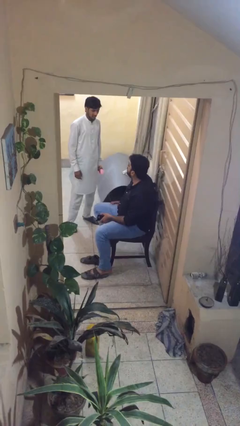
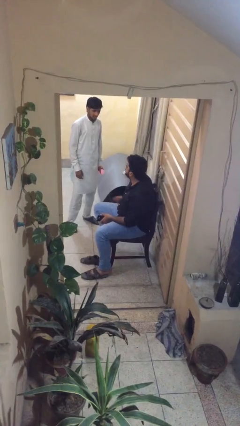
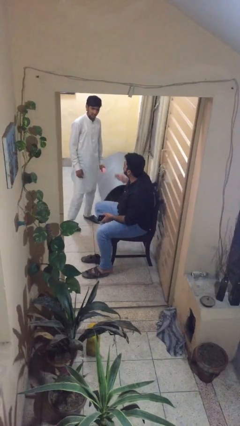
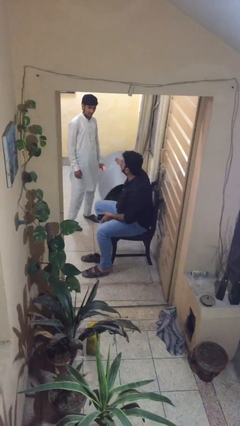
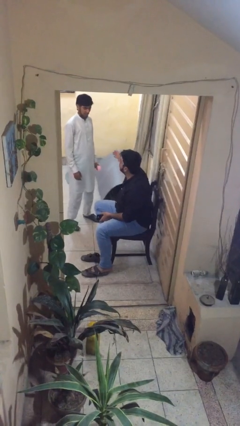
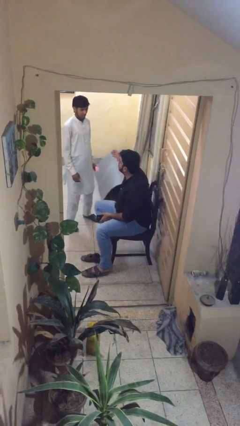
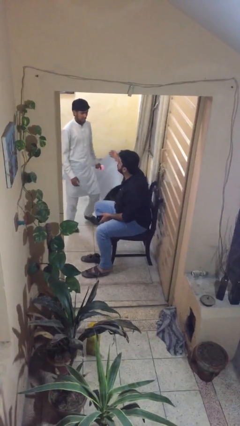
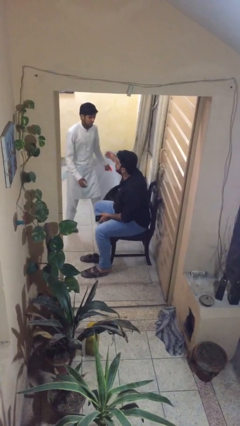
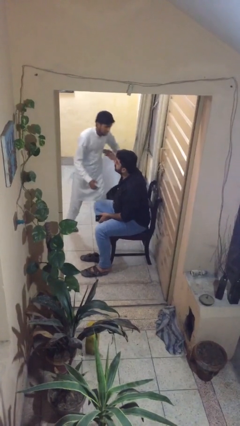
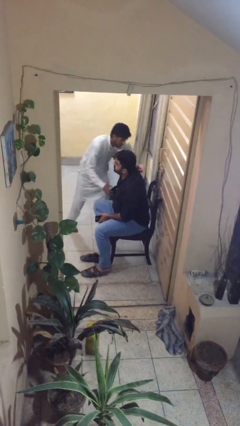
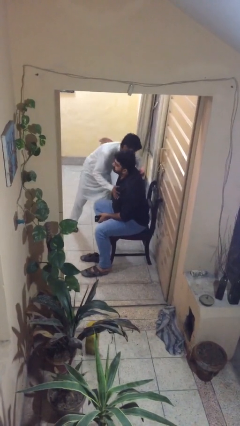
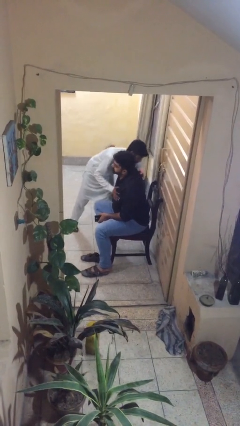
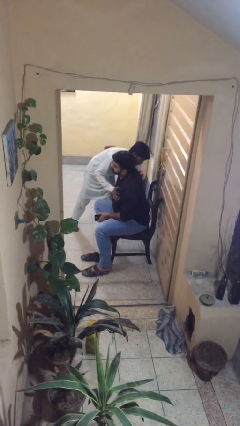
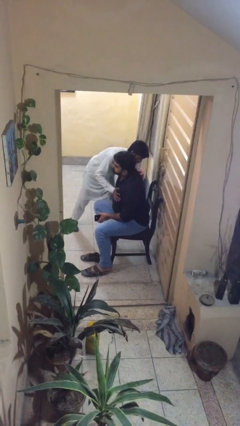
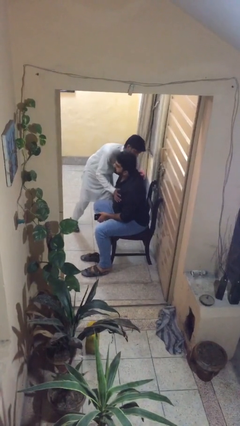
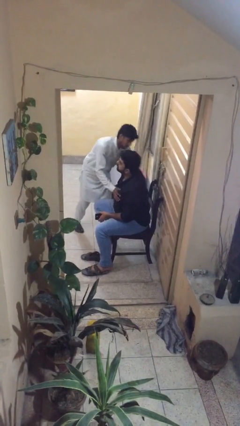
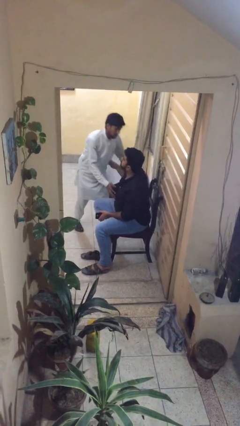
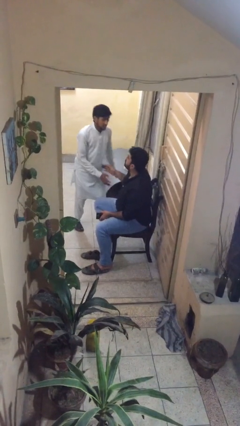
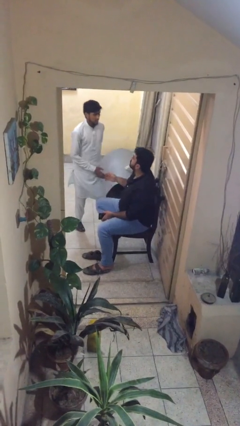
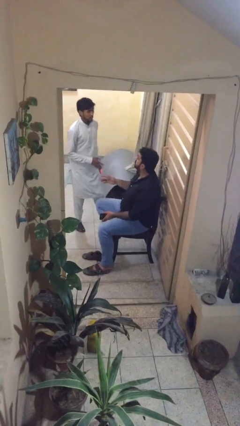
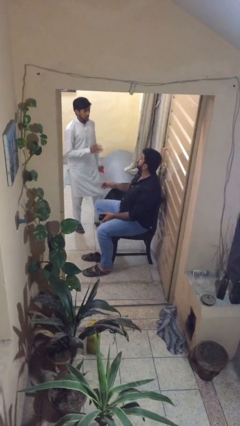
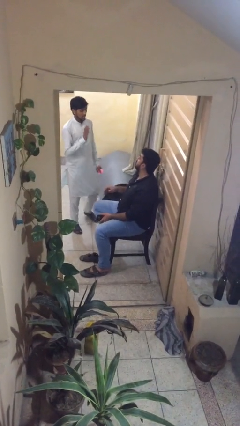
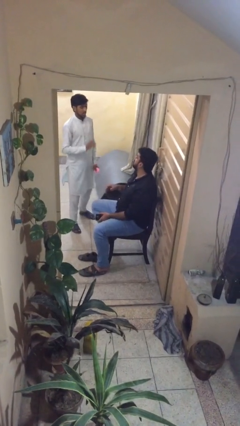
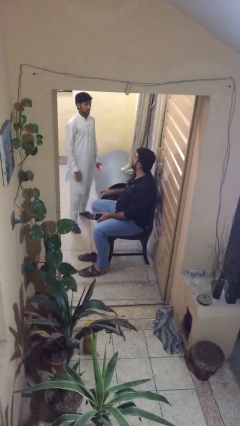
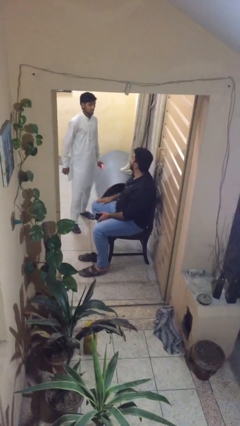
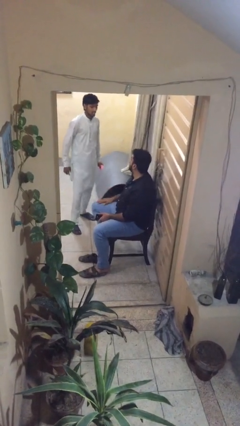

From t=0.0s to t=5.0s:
person embraces person

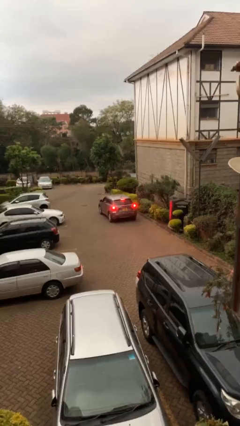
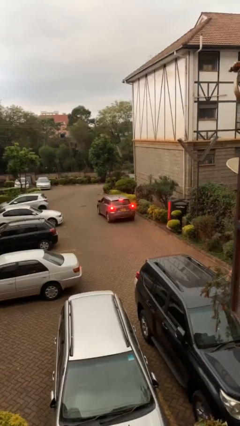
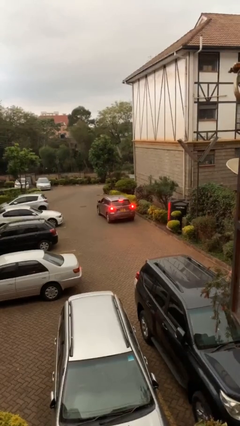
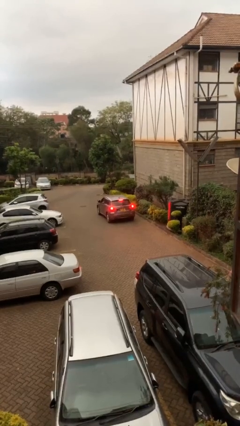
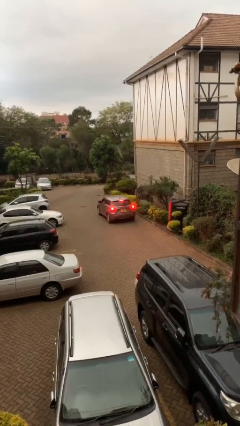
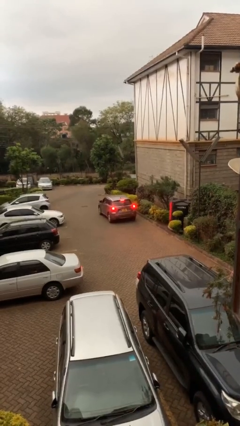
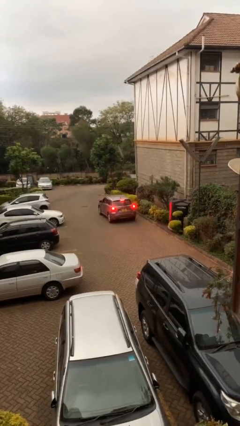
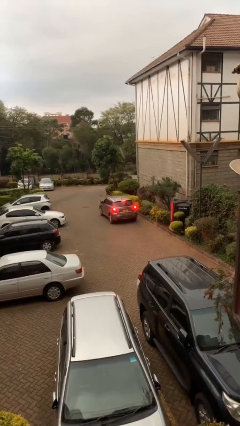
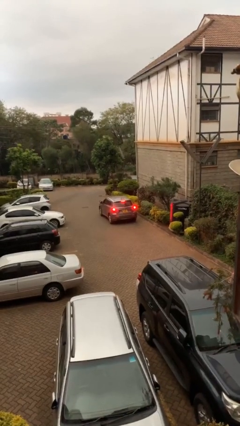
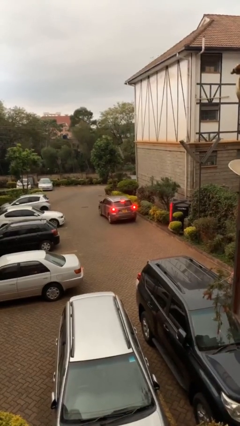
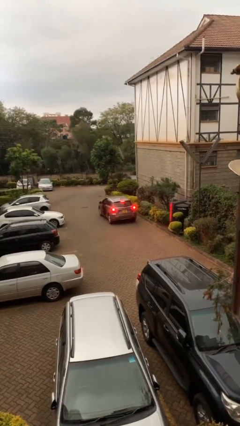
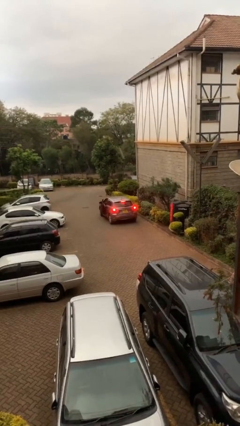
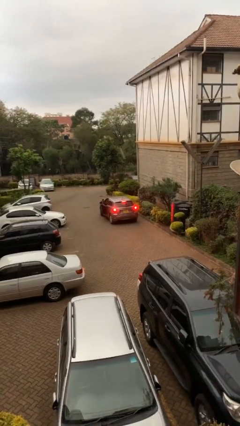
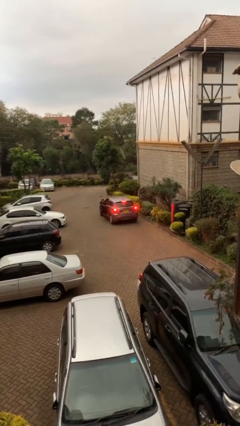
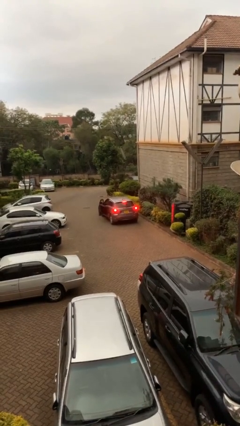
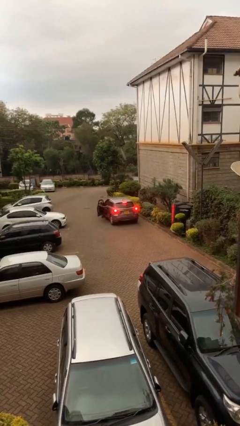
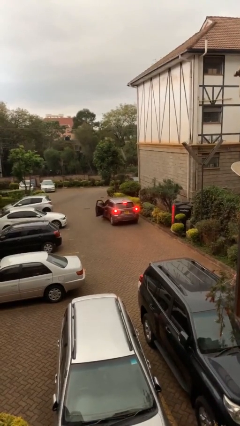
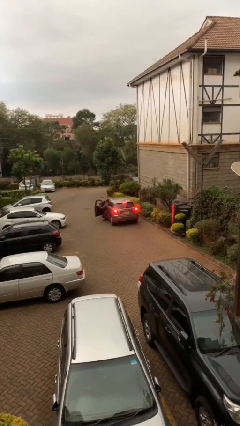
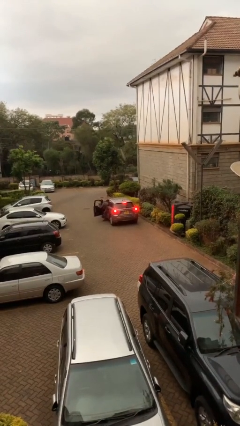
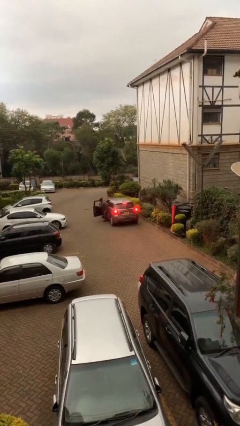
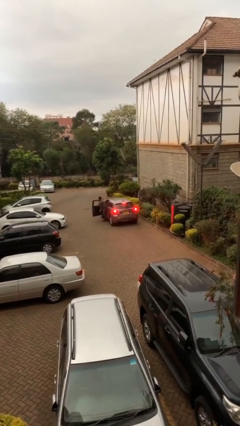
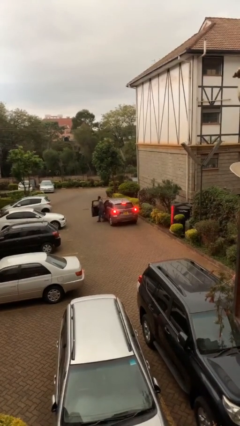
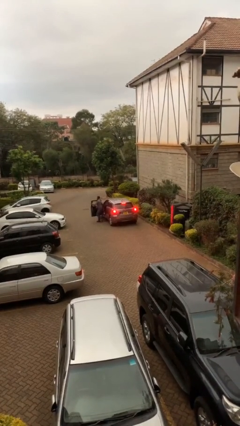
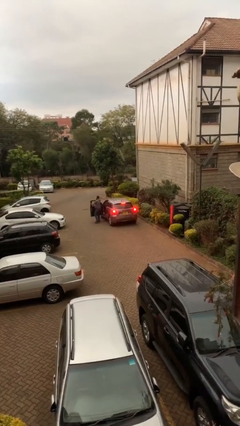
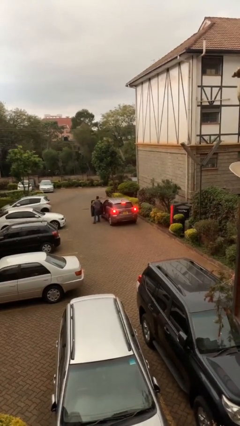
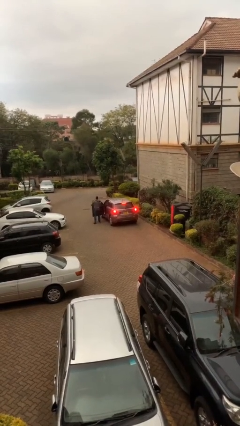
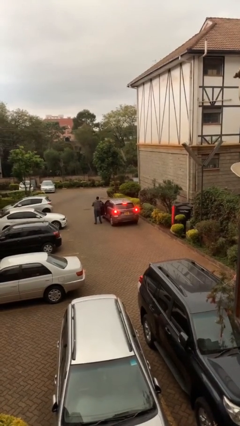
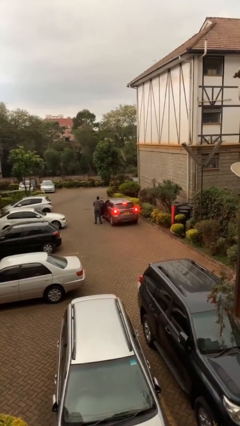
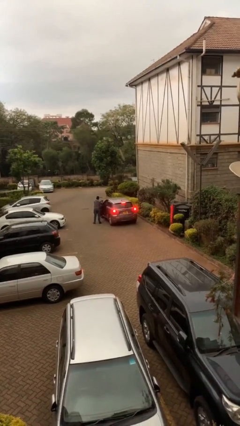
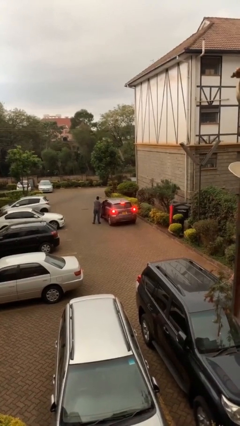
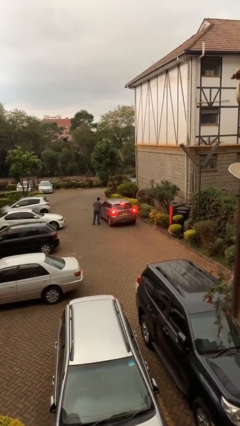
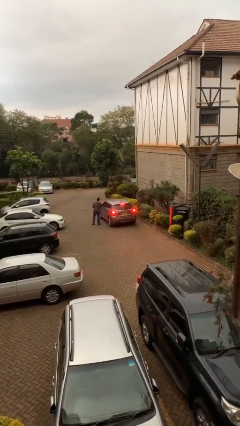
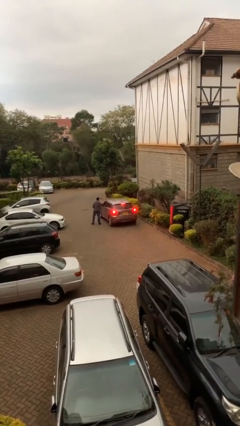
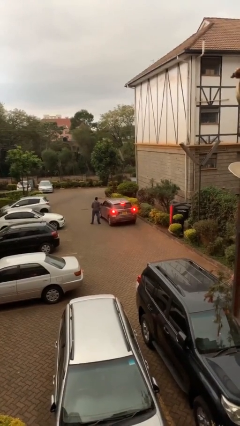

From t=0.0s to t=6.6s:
car drops off person

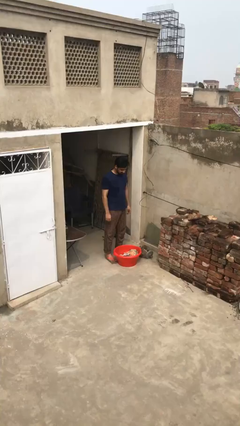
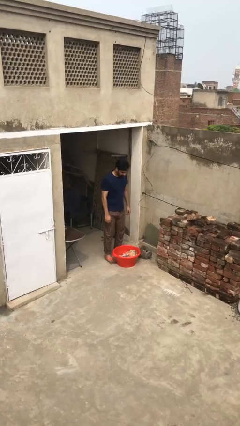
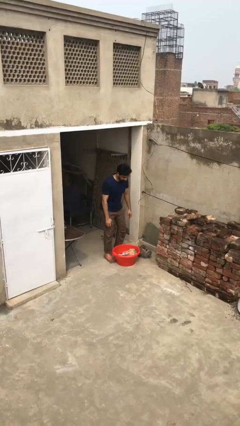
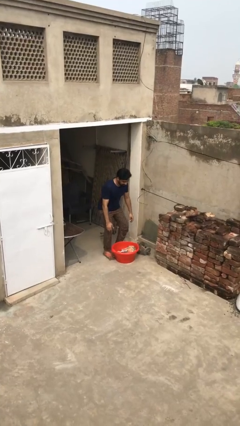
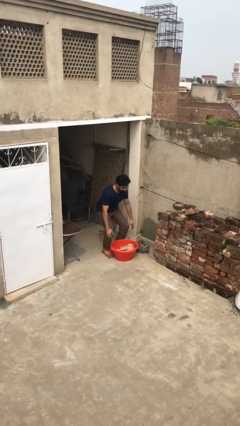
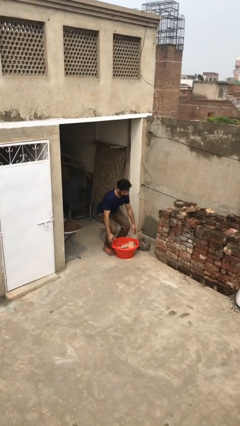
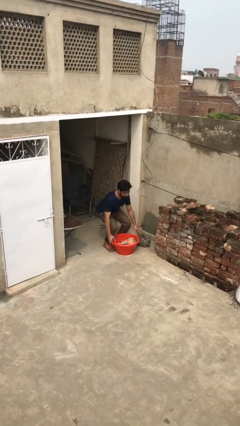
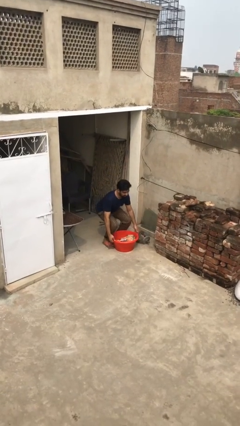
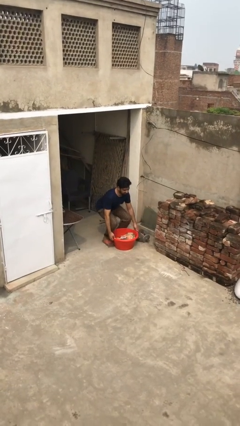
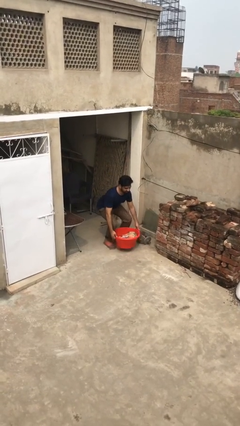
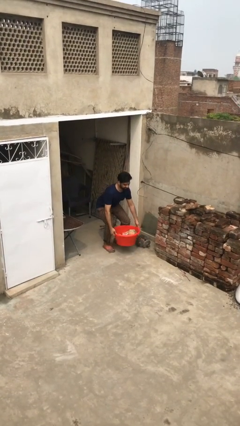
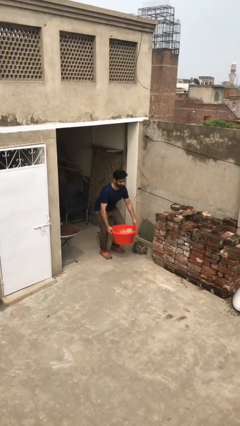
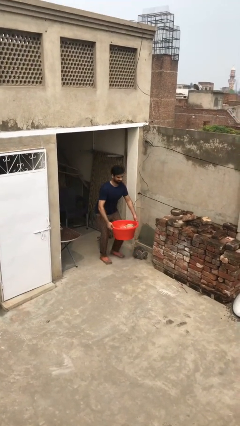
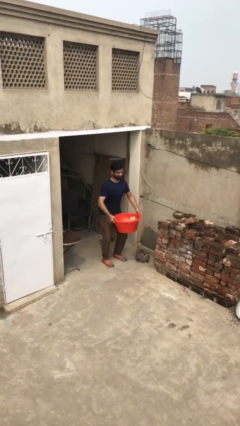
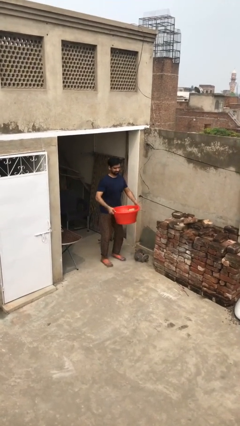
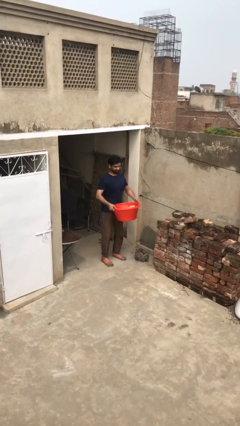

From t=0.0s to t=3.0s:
person picks up object from floor

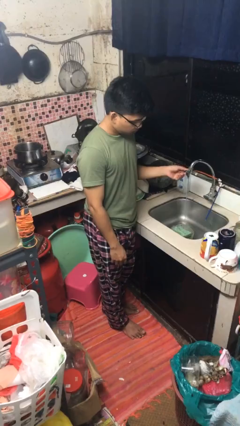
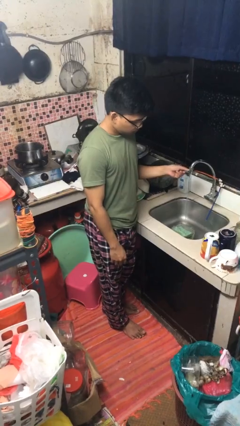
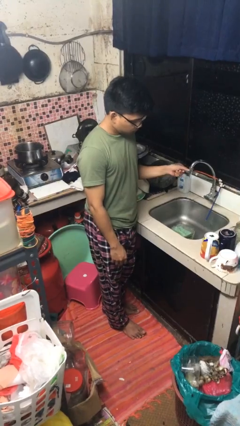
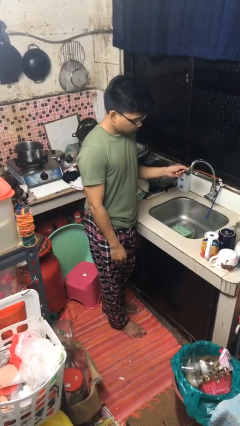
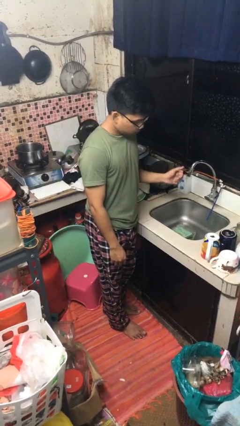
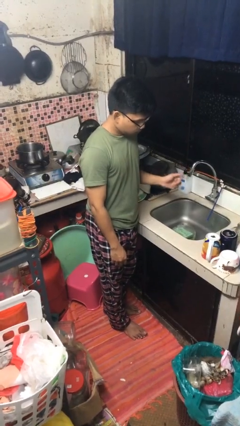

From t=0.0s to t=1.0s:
person turns off faucet

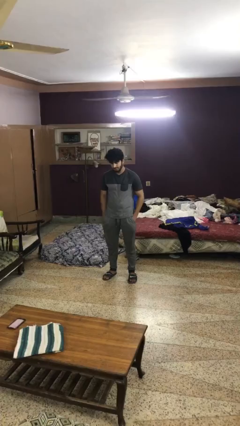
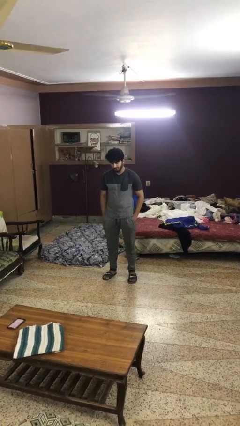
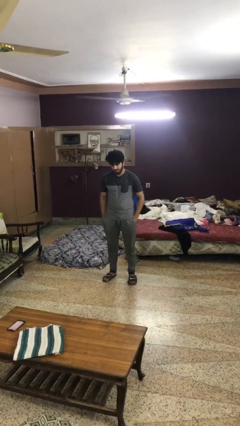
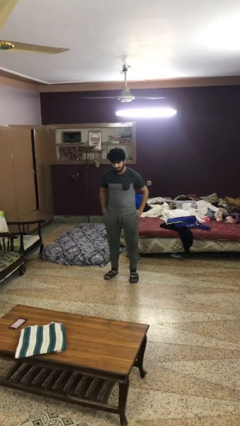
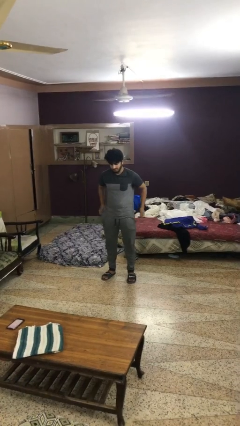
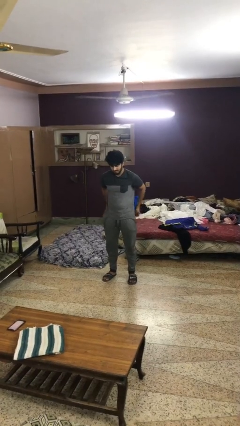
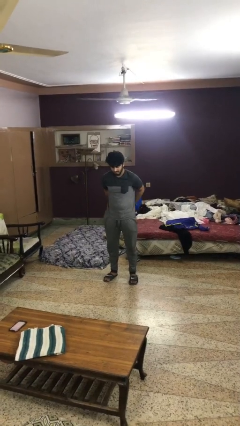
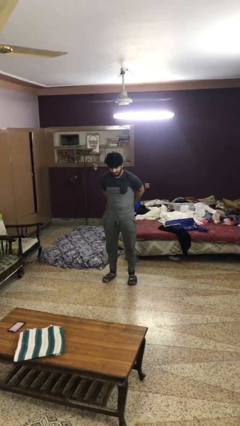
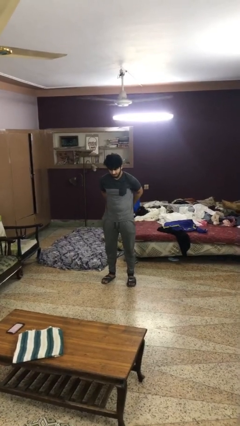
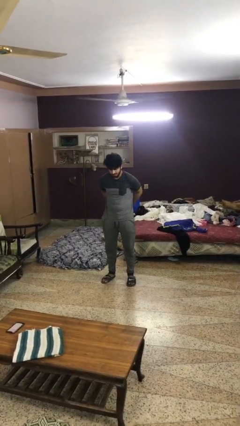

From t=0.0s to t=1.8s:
person puts hands in back pockets

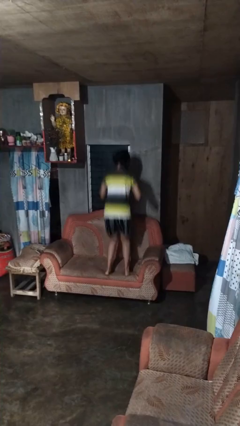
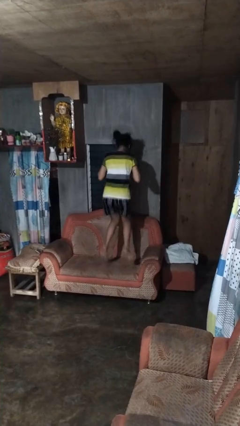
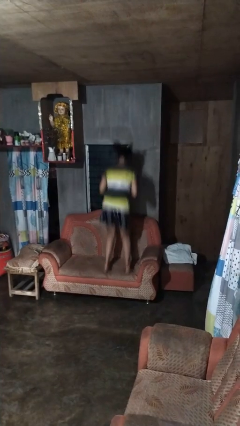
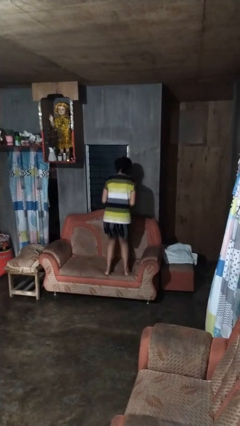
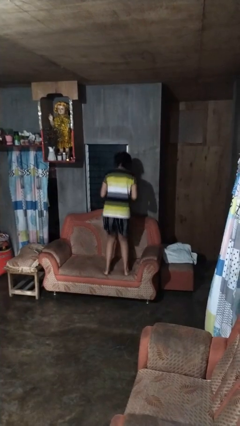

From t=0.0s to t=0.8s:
person jumps on couch
